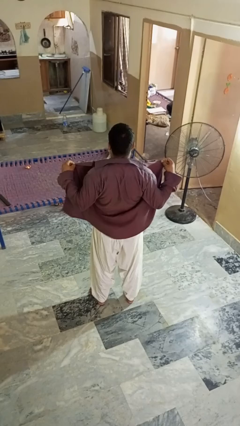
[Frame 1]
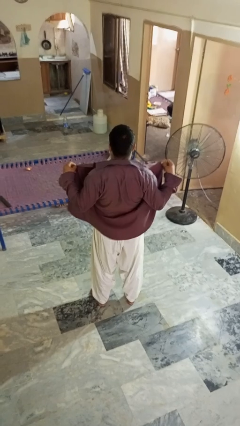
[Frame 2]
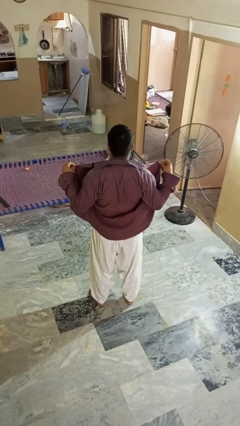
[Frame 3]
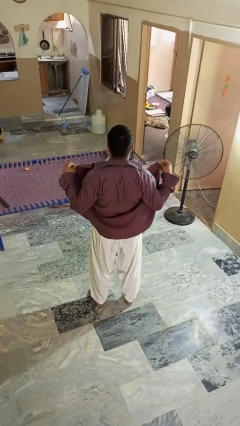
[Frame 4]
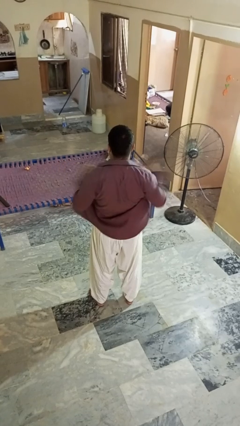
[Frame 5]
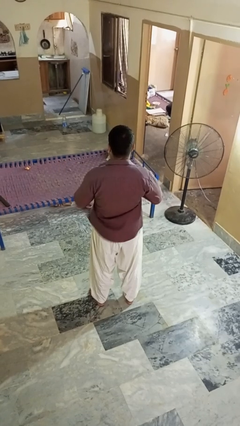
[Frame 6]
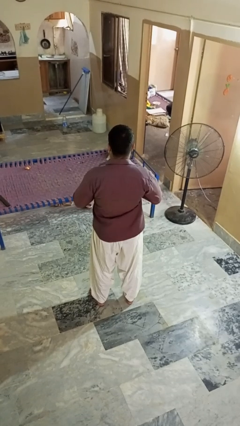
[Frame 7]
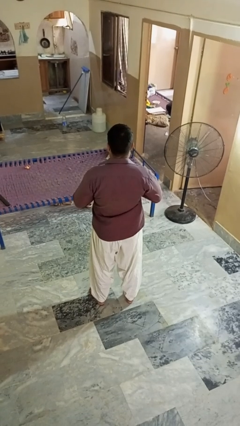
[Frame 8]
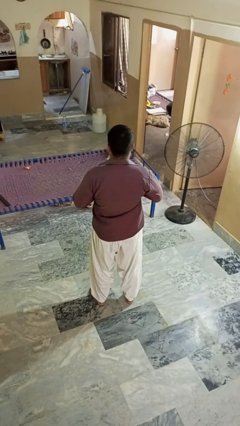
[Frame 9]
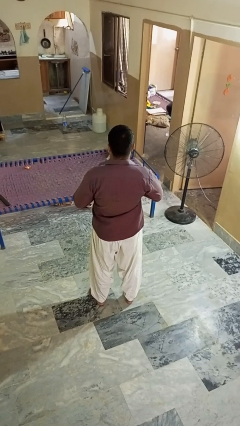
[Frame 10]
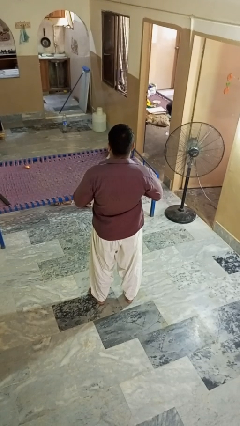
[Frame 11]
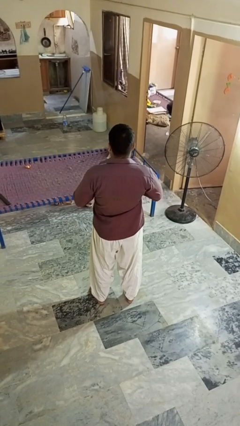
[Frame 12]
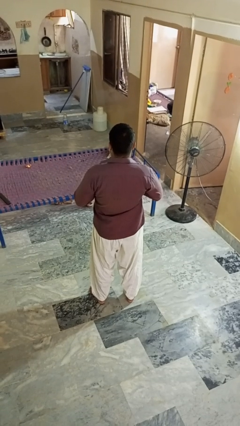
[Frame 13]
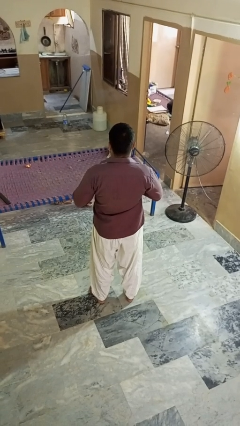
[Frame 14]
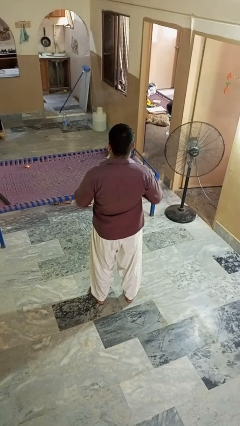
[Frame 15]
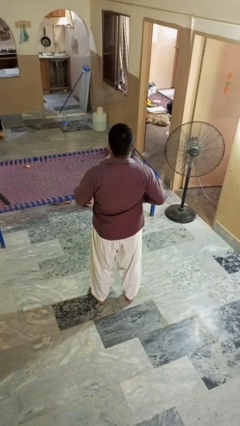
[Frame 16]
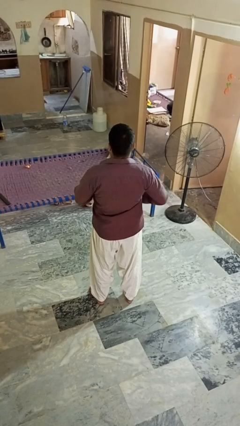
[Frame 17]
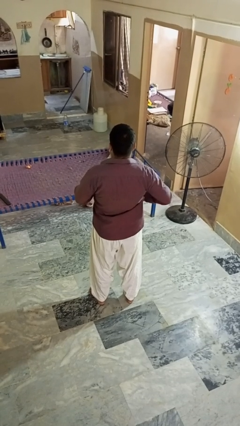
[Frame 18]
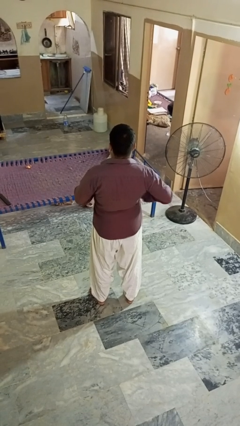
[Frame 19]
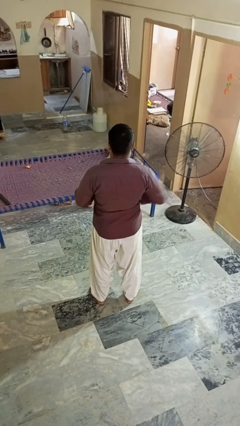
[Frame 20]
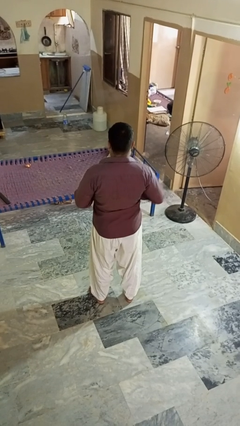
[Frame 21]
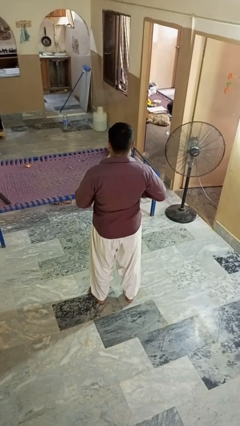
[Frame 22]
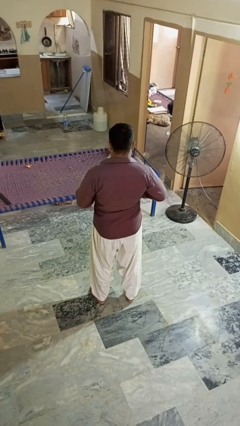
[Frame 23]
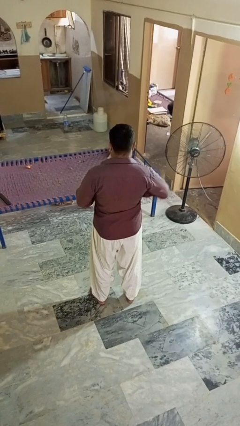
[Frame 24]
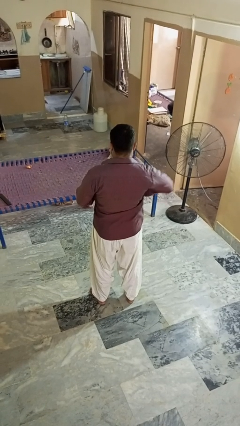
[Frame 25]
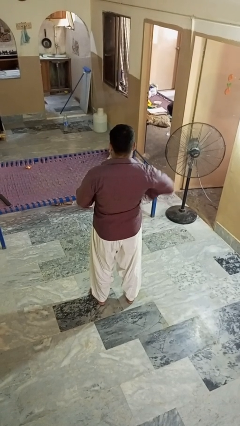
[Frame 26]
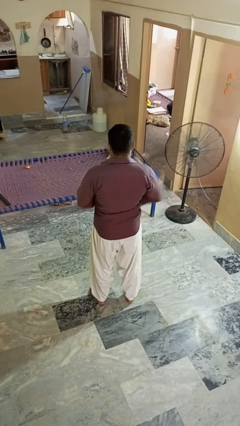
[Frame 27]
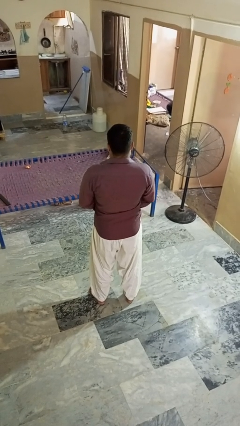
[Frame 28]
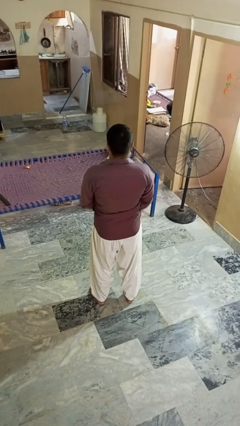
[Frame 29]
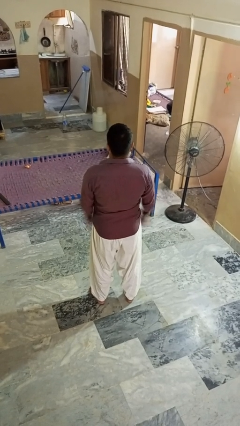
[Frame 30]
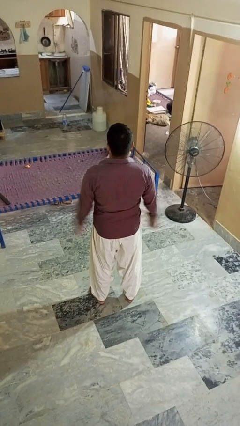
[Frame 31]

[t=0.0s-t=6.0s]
person buttons shirt

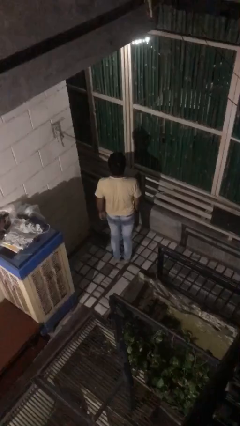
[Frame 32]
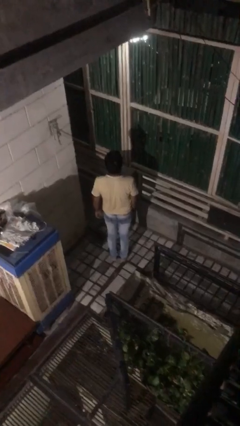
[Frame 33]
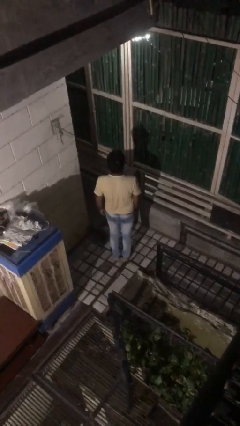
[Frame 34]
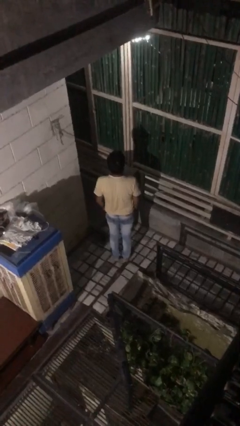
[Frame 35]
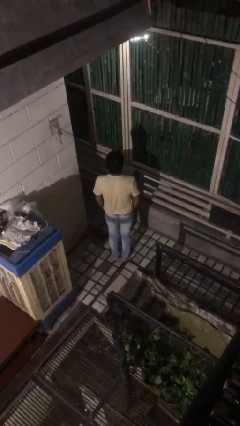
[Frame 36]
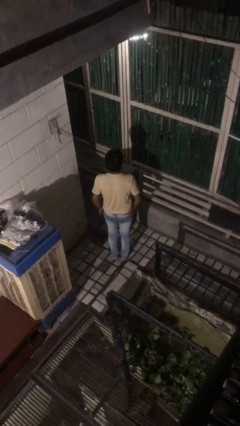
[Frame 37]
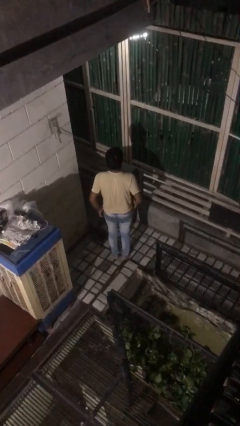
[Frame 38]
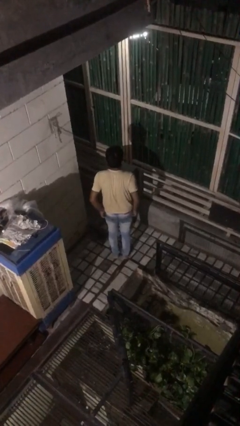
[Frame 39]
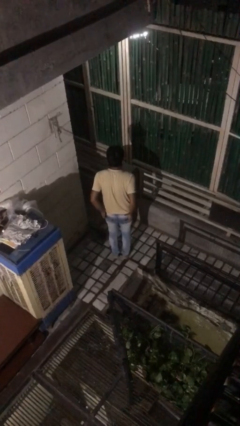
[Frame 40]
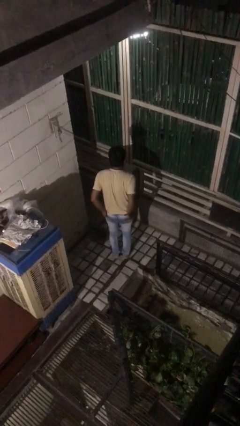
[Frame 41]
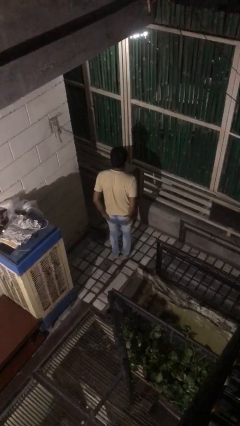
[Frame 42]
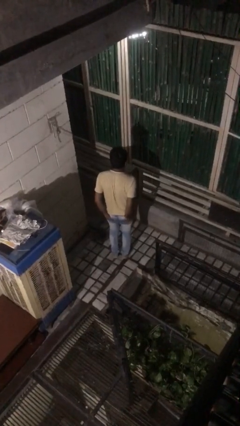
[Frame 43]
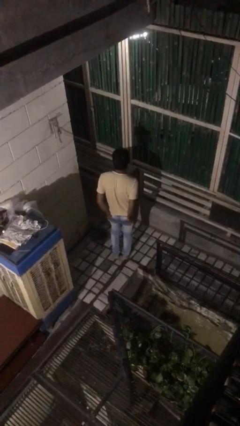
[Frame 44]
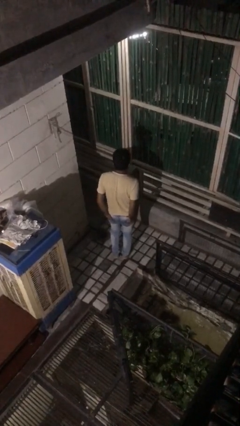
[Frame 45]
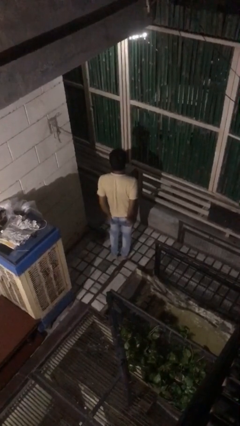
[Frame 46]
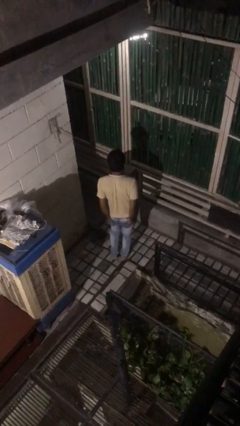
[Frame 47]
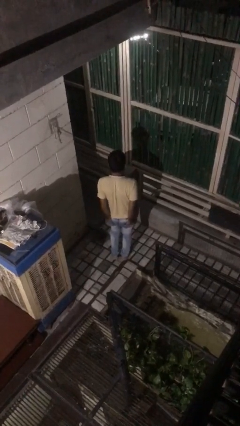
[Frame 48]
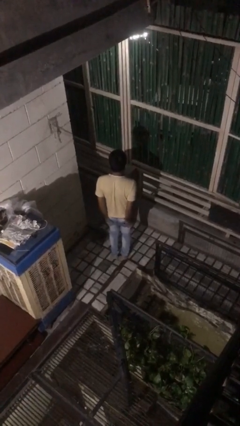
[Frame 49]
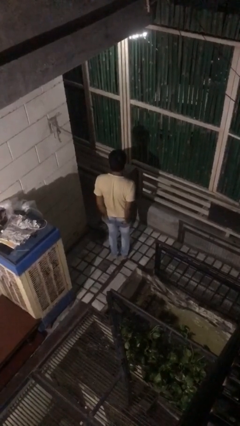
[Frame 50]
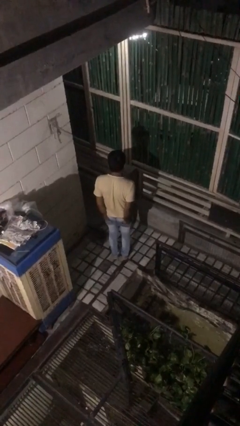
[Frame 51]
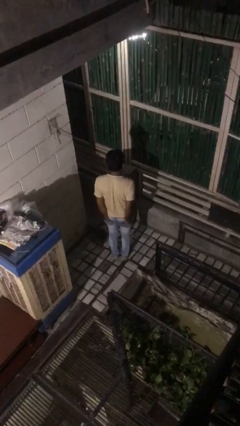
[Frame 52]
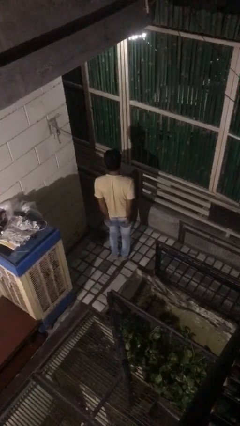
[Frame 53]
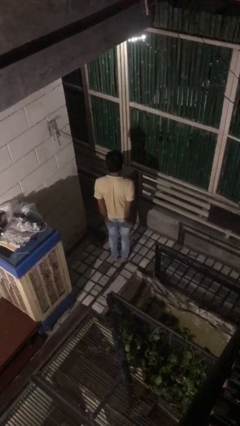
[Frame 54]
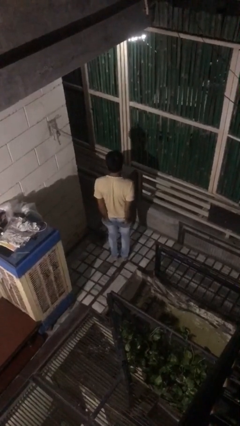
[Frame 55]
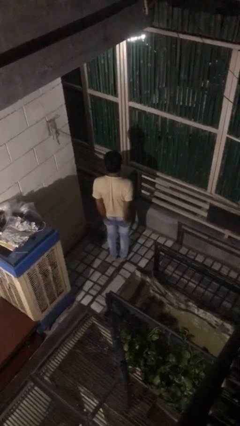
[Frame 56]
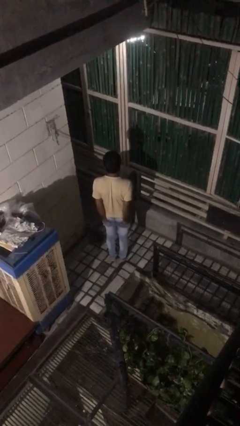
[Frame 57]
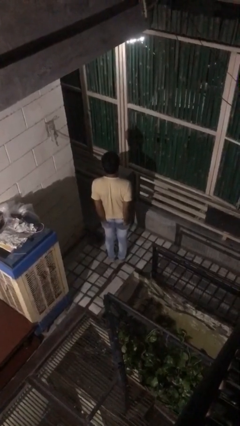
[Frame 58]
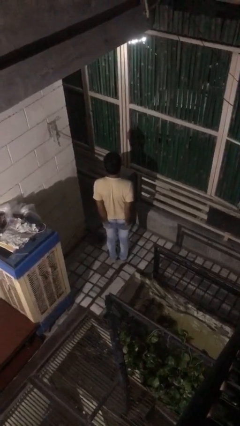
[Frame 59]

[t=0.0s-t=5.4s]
person puts hands in back pockets

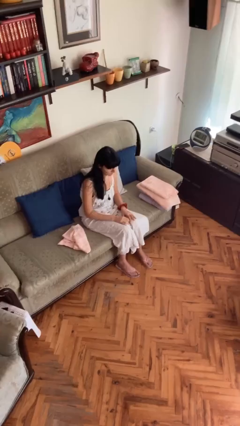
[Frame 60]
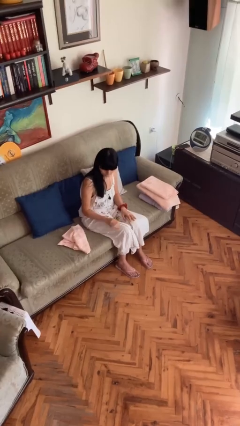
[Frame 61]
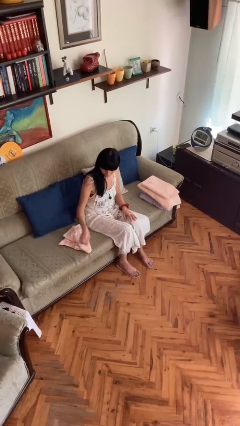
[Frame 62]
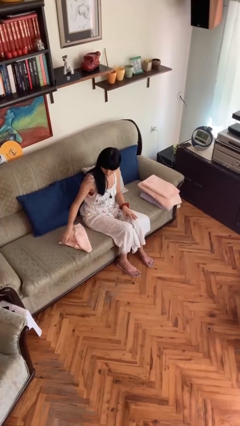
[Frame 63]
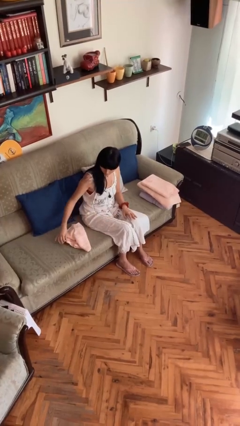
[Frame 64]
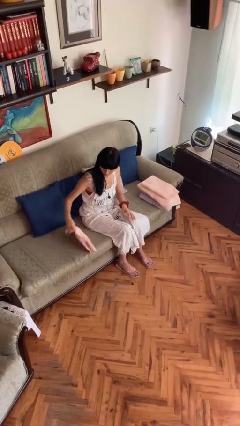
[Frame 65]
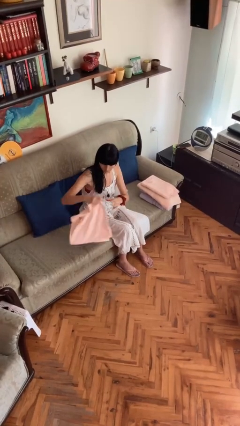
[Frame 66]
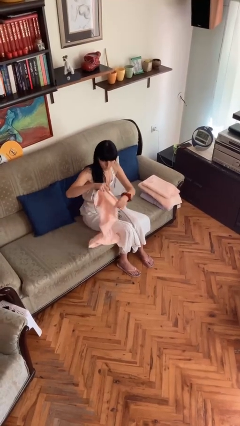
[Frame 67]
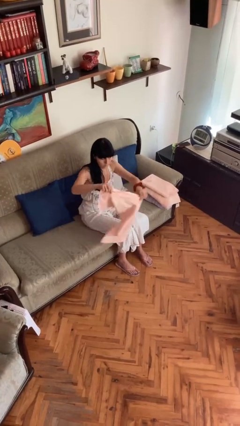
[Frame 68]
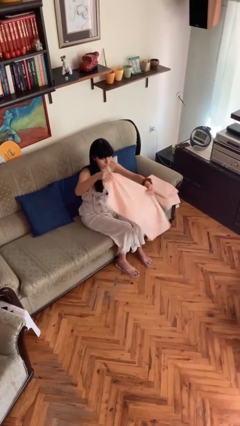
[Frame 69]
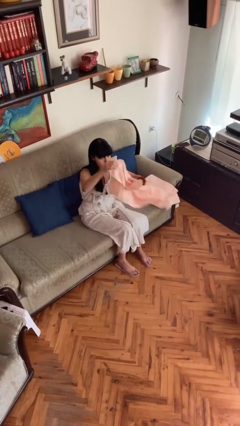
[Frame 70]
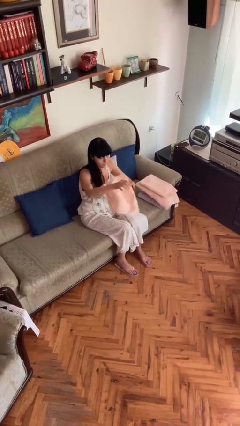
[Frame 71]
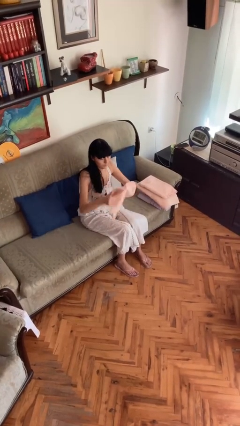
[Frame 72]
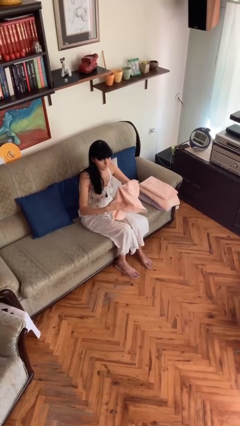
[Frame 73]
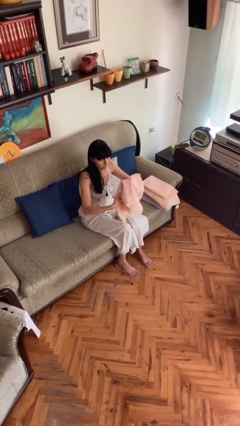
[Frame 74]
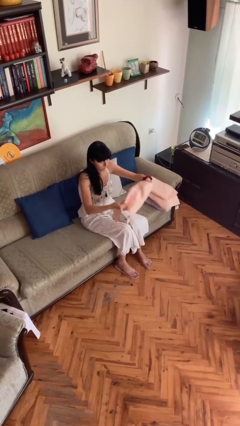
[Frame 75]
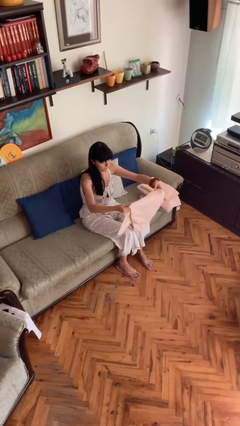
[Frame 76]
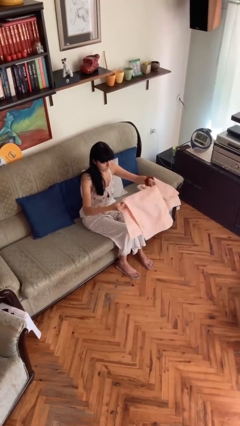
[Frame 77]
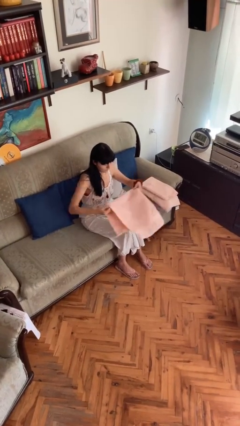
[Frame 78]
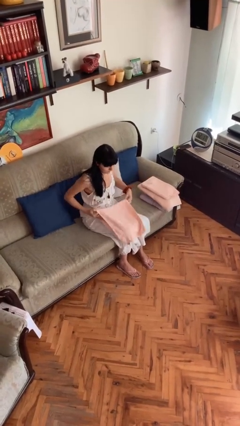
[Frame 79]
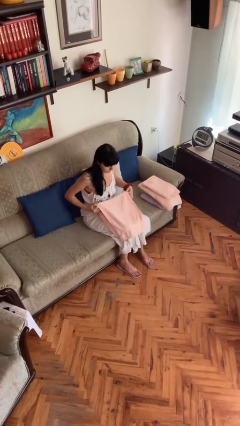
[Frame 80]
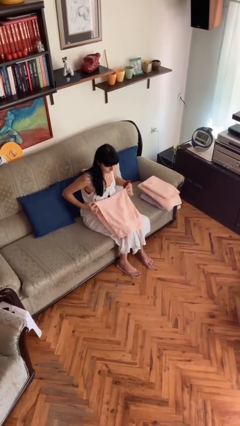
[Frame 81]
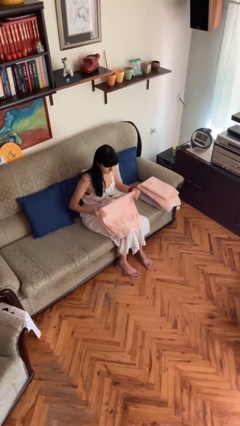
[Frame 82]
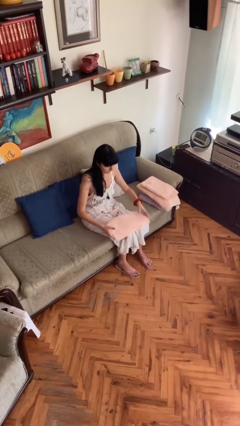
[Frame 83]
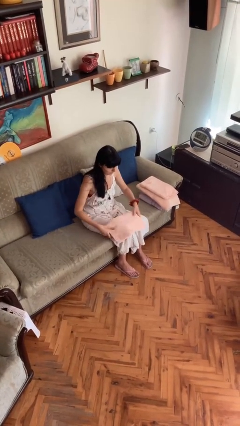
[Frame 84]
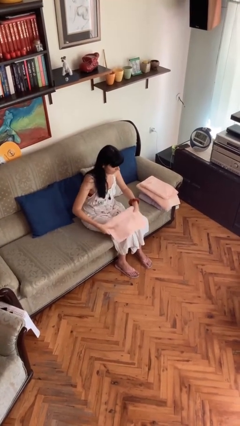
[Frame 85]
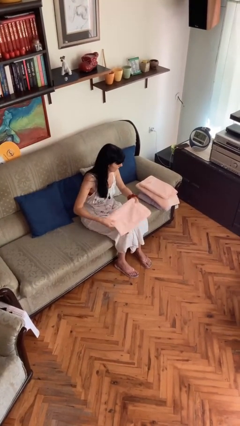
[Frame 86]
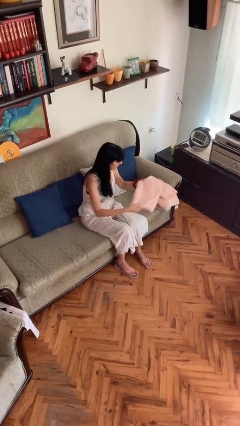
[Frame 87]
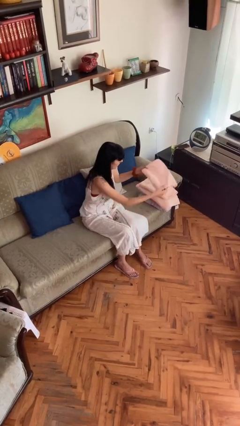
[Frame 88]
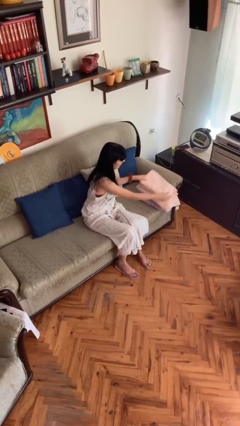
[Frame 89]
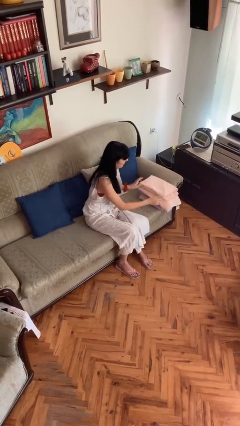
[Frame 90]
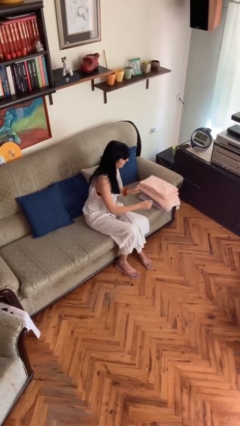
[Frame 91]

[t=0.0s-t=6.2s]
person folds towel
